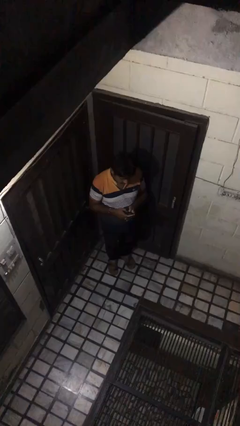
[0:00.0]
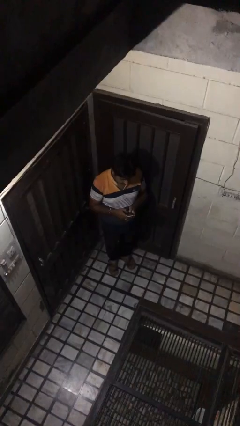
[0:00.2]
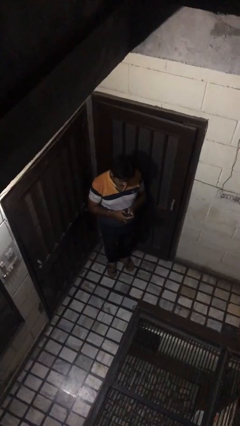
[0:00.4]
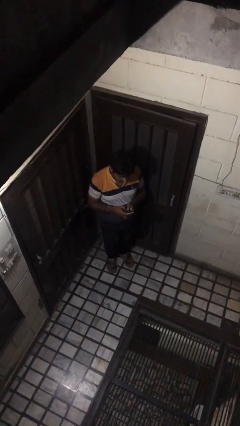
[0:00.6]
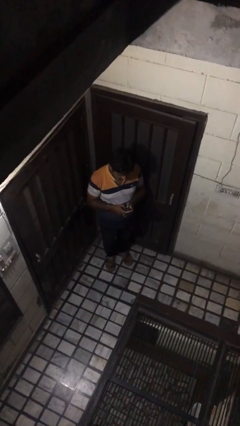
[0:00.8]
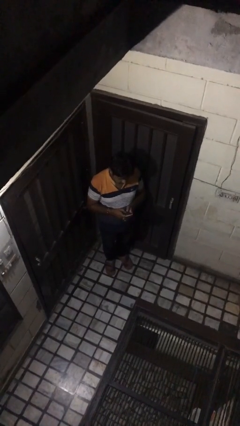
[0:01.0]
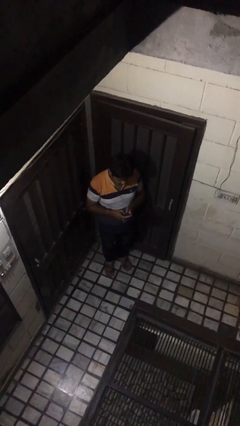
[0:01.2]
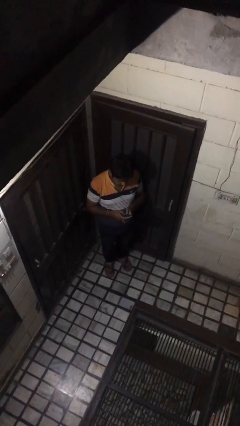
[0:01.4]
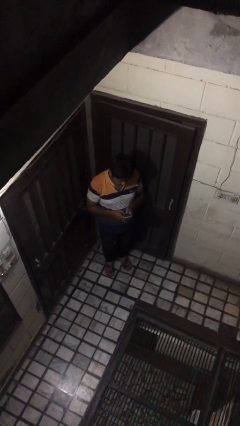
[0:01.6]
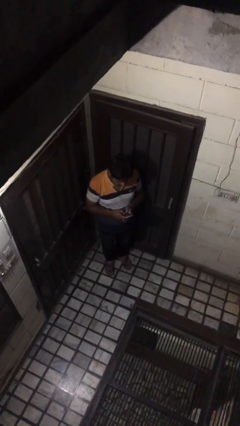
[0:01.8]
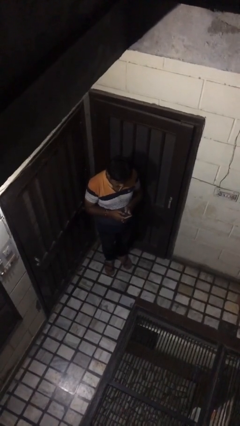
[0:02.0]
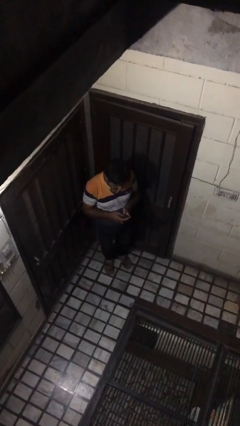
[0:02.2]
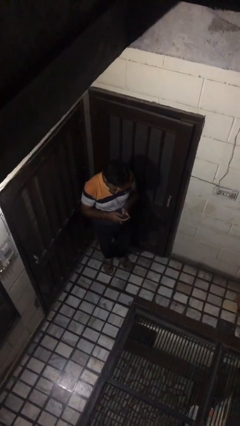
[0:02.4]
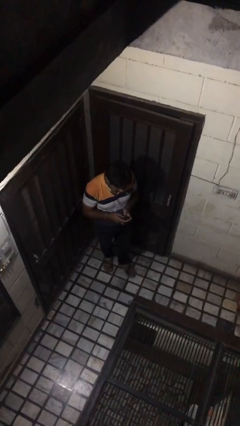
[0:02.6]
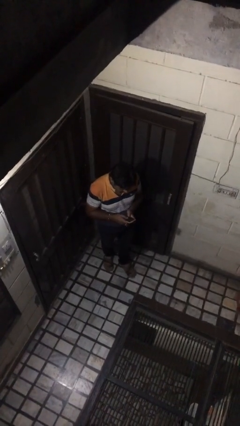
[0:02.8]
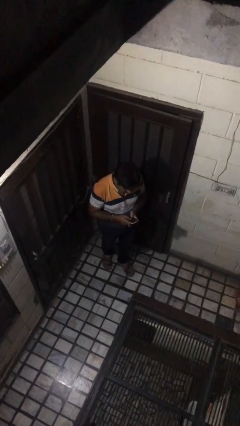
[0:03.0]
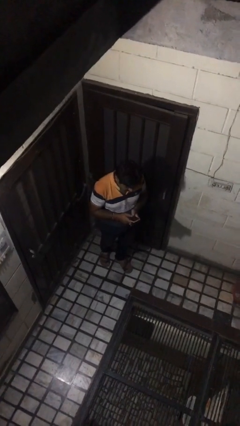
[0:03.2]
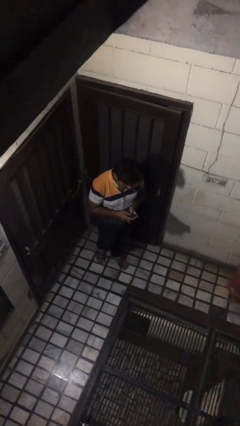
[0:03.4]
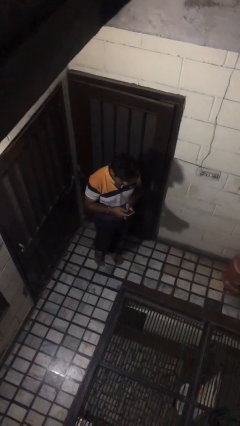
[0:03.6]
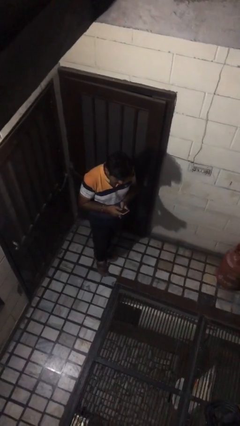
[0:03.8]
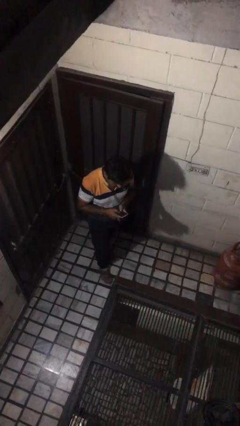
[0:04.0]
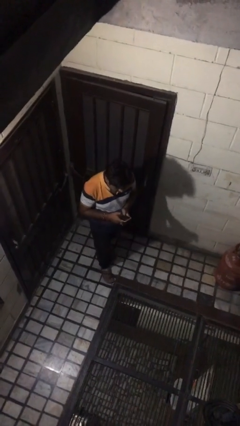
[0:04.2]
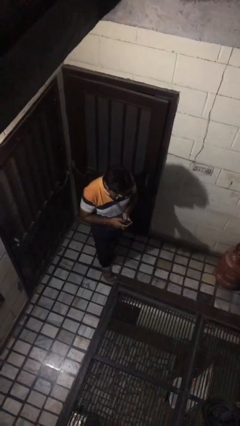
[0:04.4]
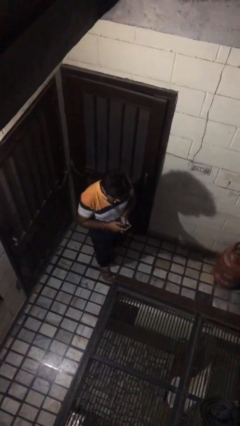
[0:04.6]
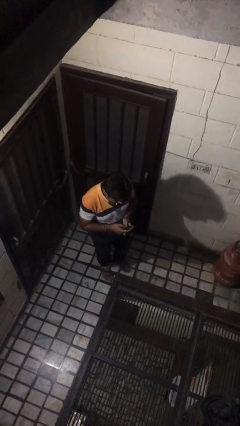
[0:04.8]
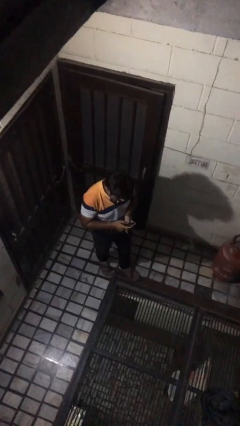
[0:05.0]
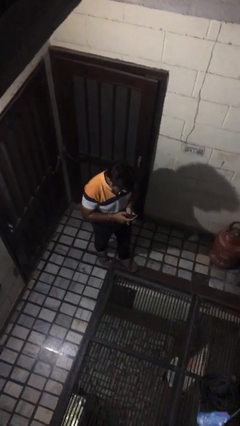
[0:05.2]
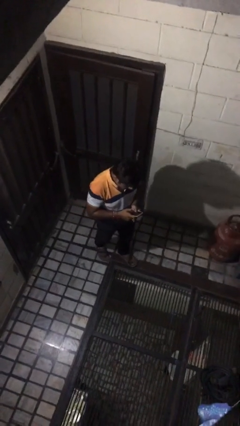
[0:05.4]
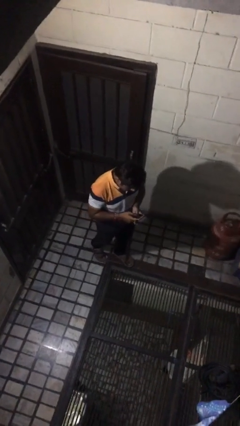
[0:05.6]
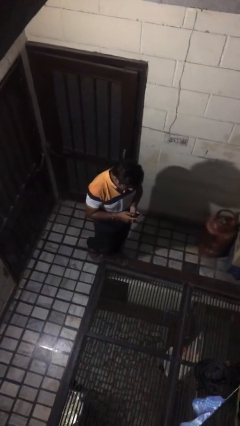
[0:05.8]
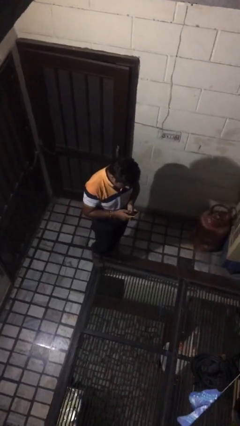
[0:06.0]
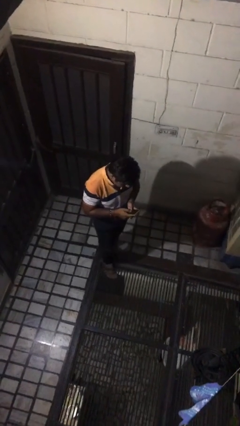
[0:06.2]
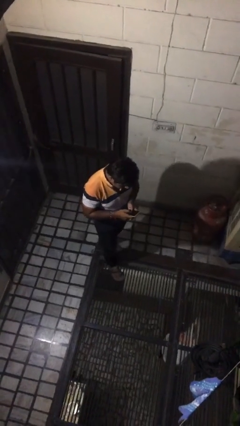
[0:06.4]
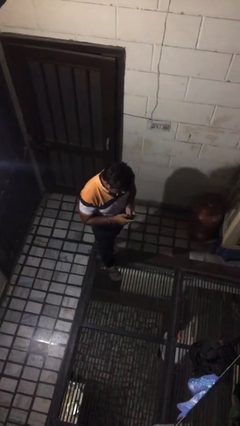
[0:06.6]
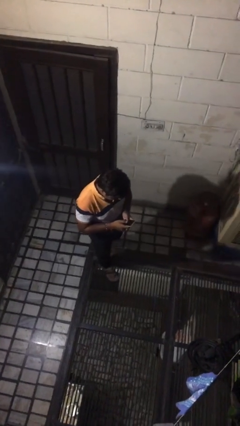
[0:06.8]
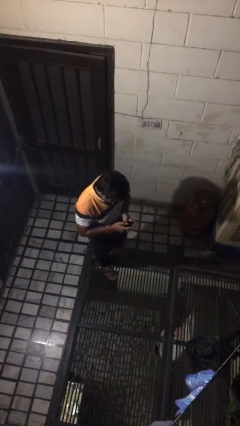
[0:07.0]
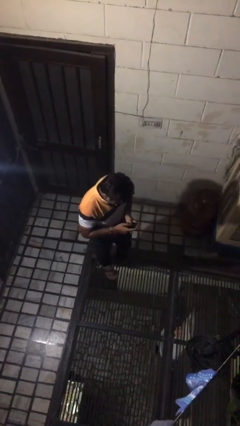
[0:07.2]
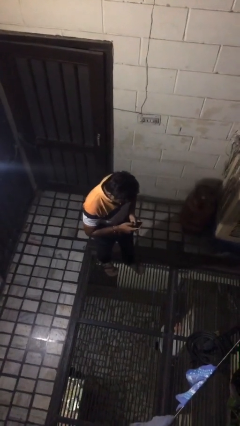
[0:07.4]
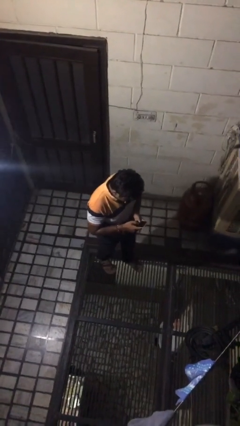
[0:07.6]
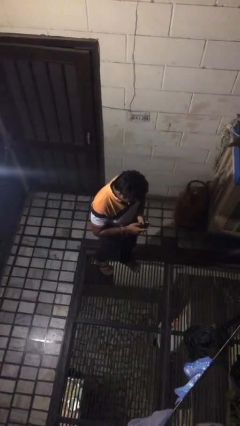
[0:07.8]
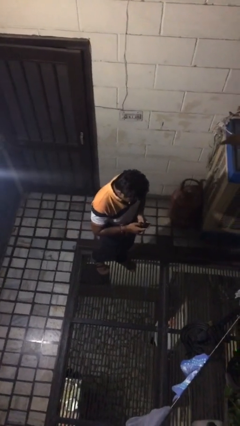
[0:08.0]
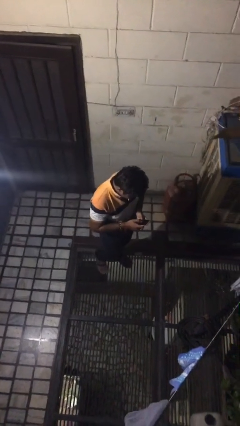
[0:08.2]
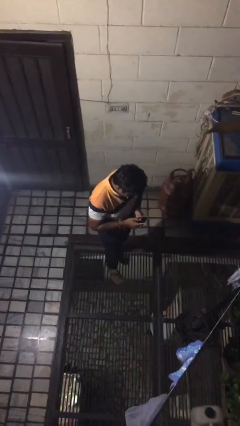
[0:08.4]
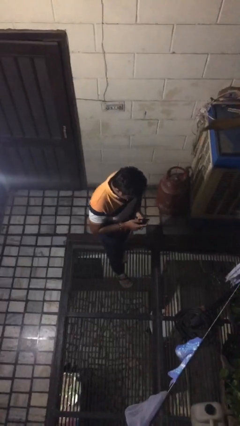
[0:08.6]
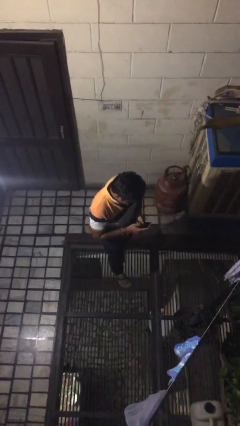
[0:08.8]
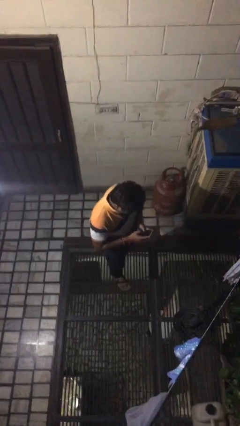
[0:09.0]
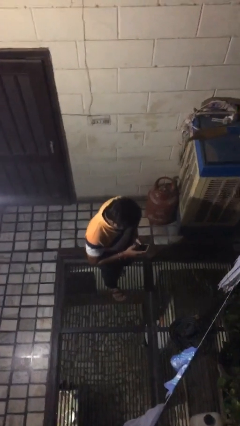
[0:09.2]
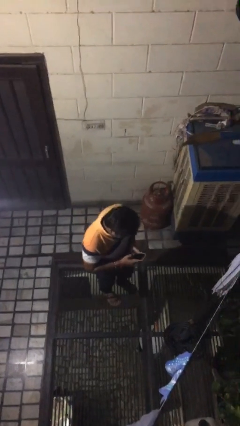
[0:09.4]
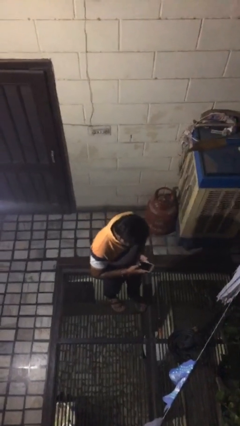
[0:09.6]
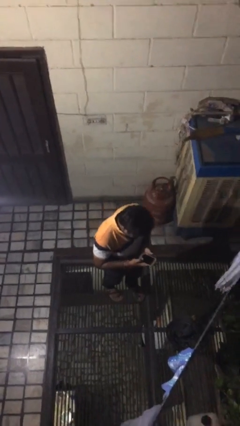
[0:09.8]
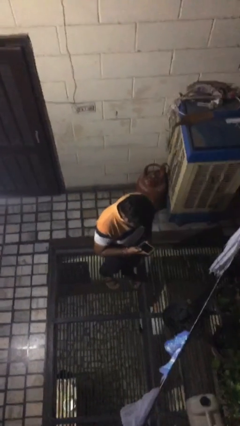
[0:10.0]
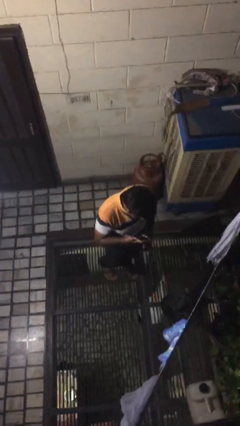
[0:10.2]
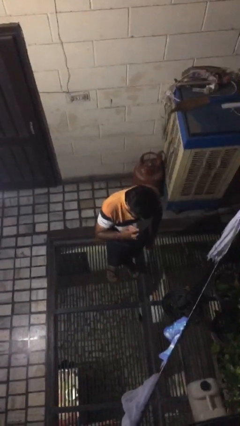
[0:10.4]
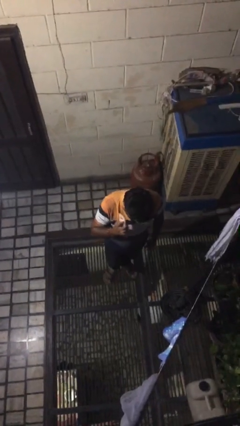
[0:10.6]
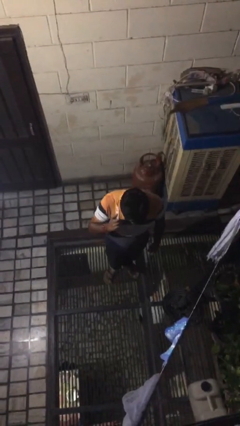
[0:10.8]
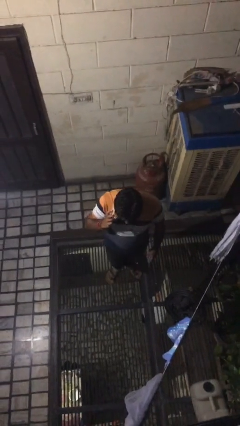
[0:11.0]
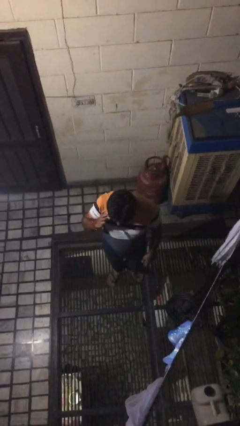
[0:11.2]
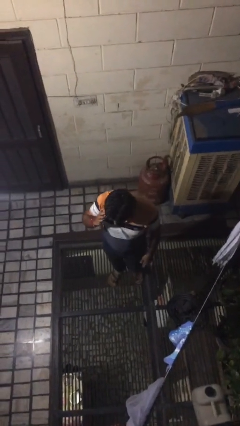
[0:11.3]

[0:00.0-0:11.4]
person texts on phone

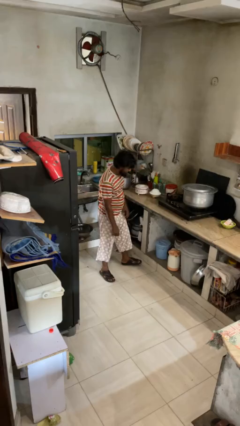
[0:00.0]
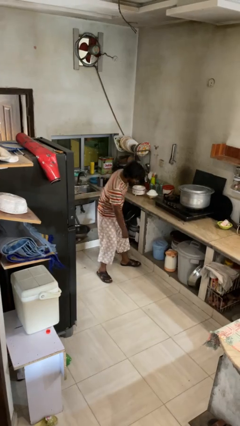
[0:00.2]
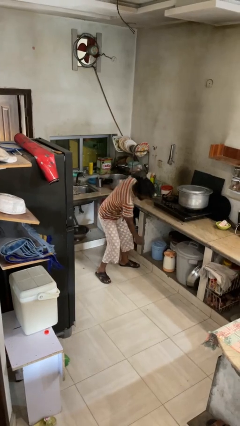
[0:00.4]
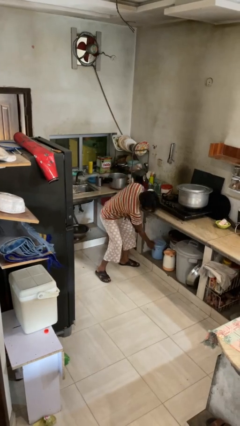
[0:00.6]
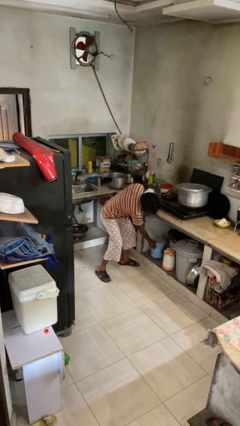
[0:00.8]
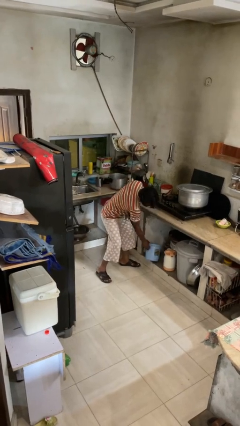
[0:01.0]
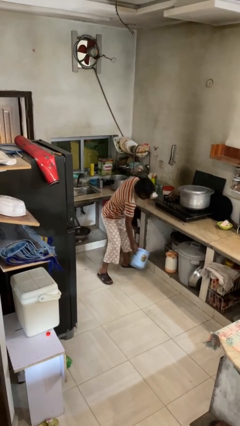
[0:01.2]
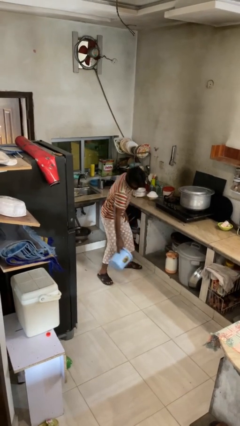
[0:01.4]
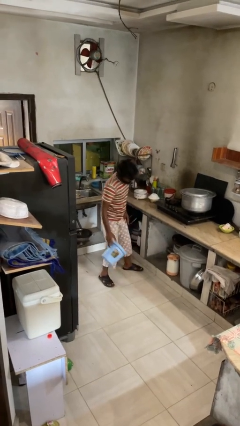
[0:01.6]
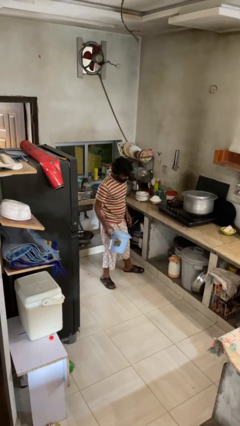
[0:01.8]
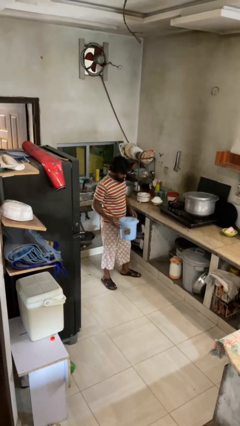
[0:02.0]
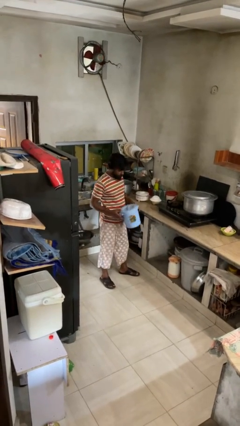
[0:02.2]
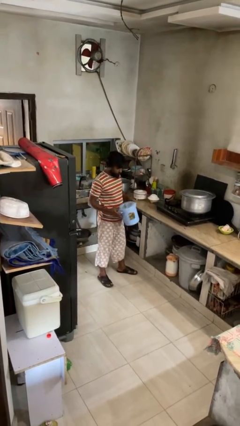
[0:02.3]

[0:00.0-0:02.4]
person picks up object from cabinet

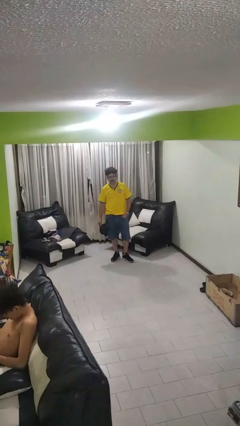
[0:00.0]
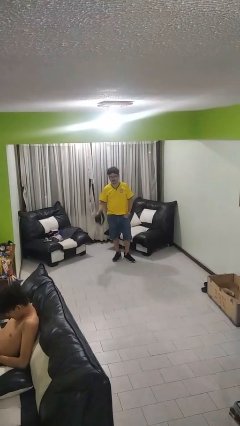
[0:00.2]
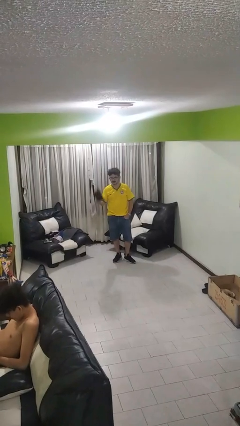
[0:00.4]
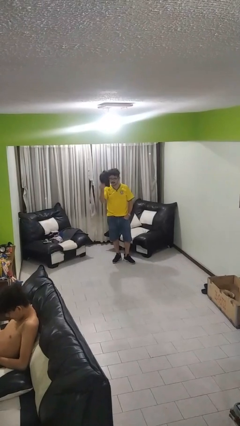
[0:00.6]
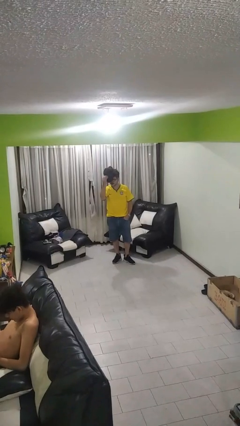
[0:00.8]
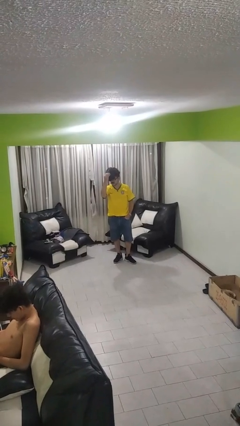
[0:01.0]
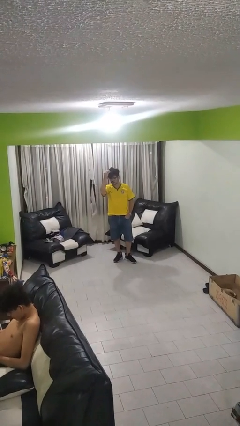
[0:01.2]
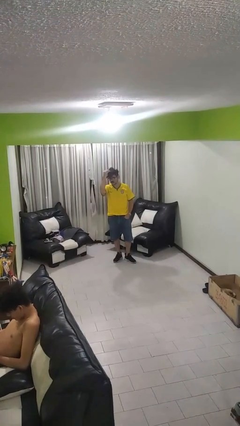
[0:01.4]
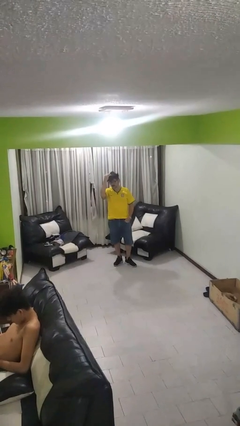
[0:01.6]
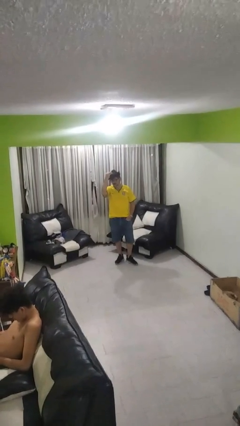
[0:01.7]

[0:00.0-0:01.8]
person puts on hat

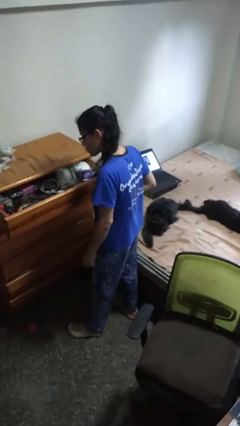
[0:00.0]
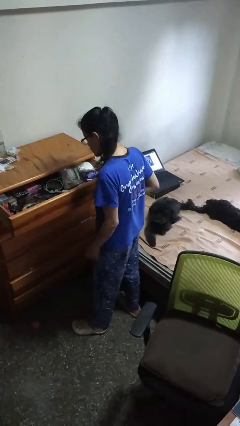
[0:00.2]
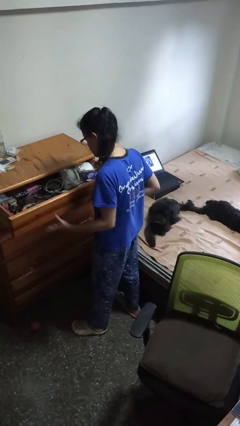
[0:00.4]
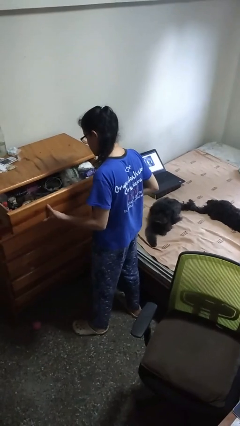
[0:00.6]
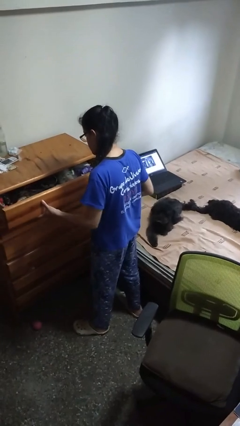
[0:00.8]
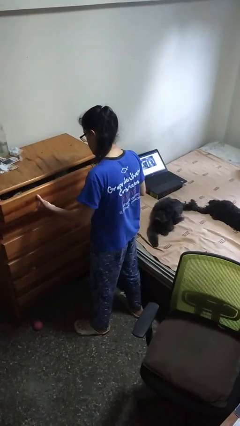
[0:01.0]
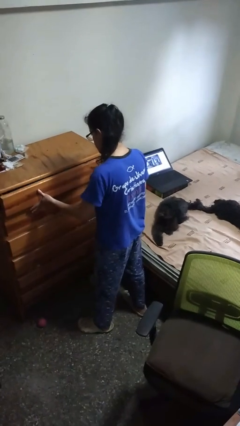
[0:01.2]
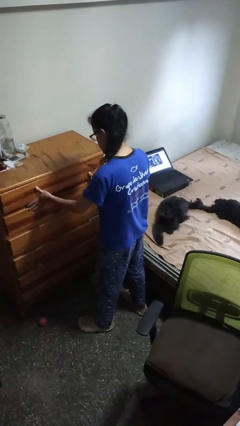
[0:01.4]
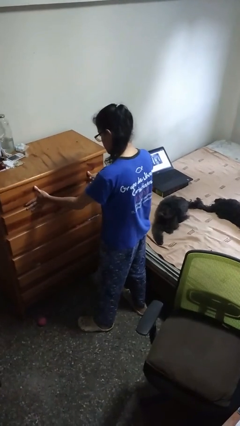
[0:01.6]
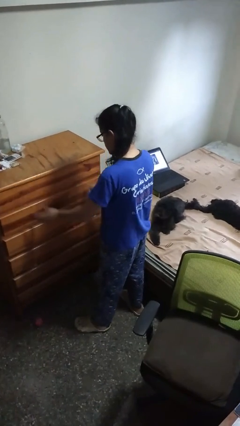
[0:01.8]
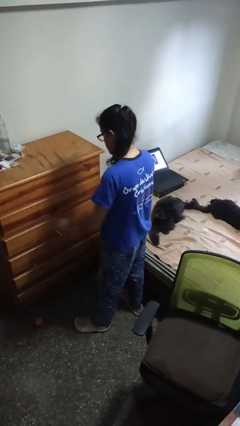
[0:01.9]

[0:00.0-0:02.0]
person closes dresser drawer

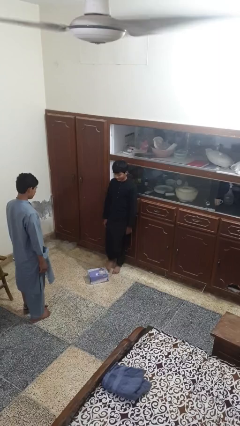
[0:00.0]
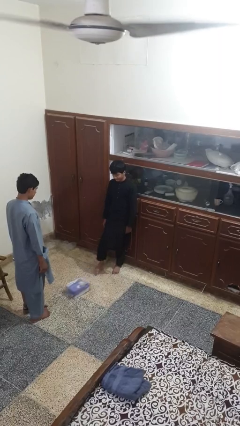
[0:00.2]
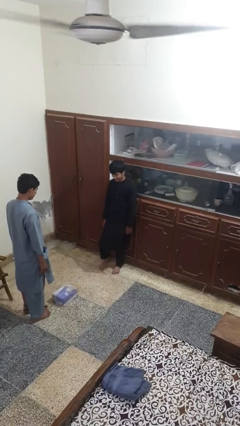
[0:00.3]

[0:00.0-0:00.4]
person kicks object to person
